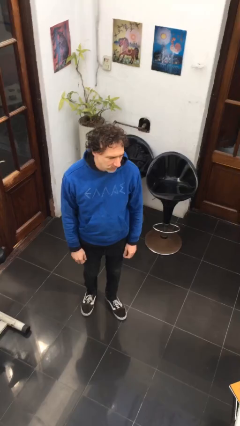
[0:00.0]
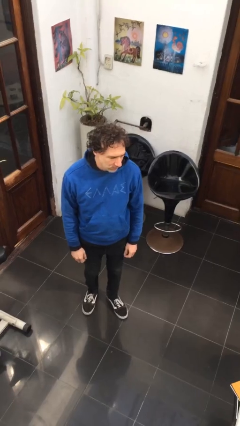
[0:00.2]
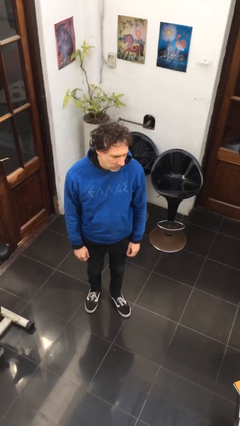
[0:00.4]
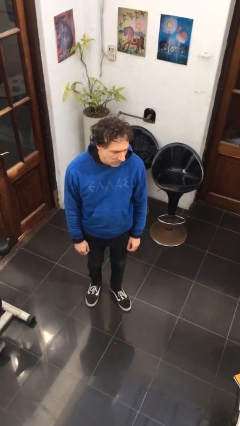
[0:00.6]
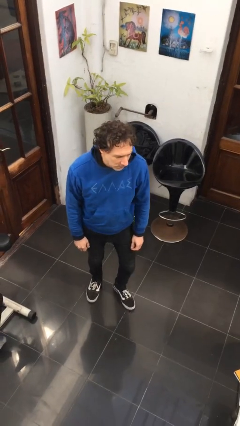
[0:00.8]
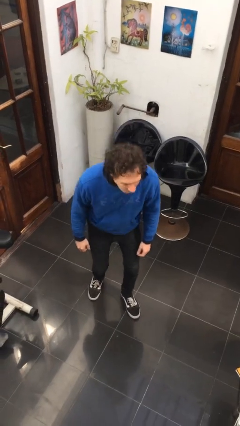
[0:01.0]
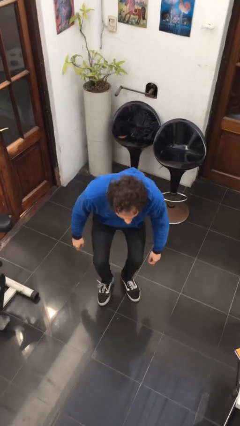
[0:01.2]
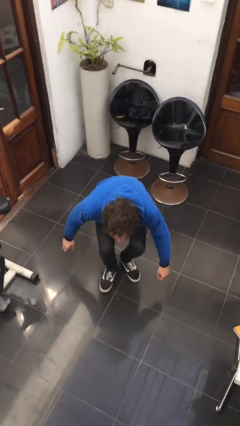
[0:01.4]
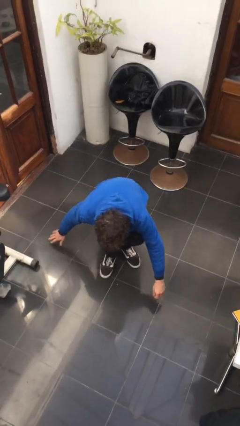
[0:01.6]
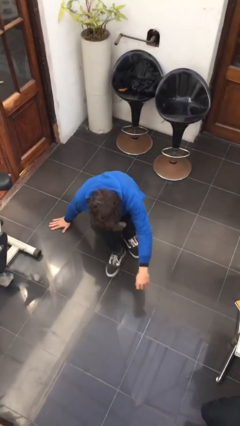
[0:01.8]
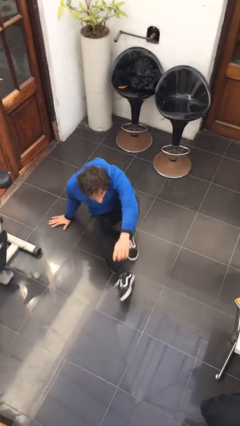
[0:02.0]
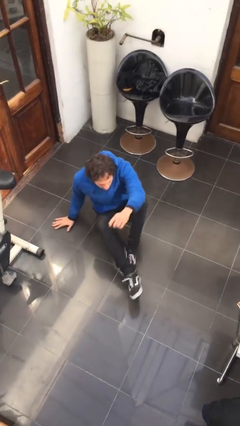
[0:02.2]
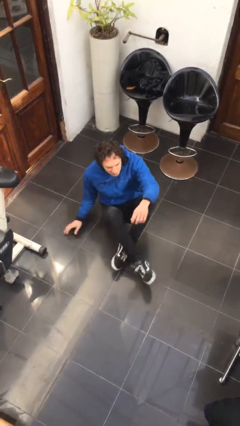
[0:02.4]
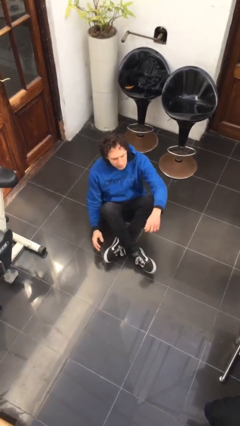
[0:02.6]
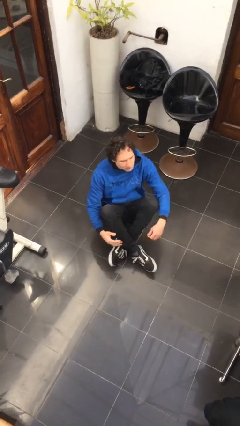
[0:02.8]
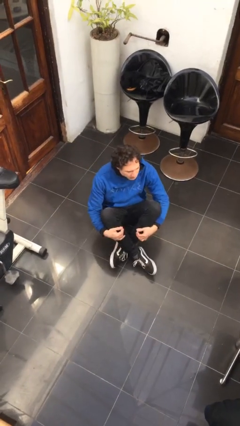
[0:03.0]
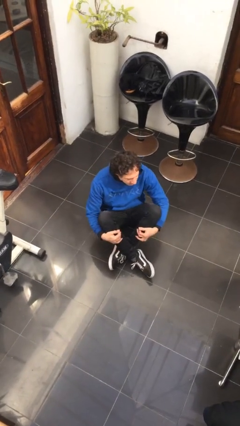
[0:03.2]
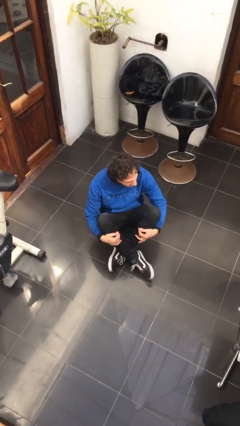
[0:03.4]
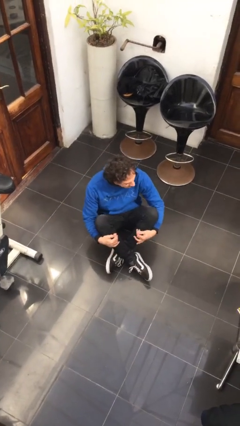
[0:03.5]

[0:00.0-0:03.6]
person sits crisscross

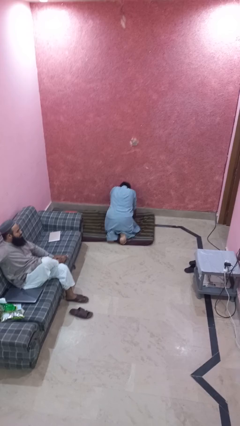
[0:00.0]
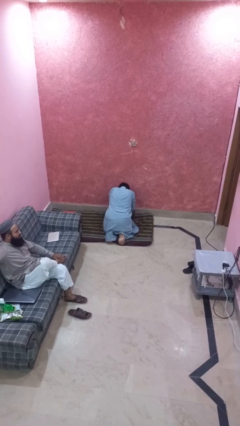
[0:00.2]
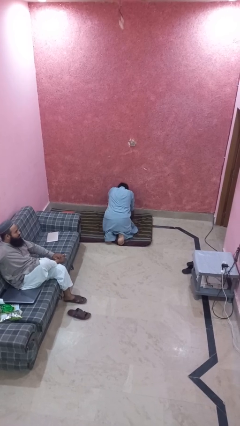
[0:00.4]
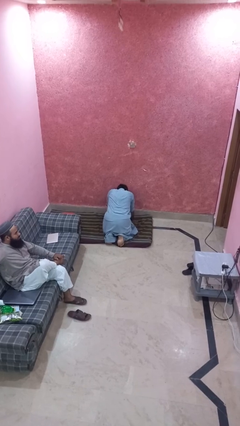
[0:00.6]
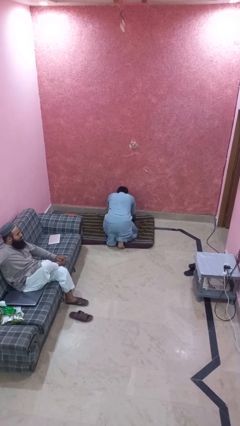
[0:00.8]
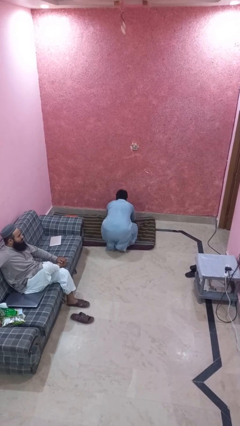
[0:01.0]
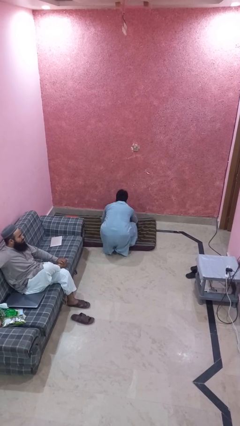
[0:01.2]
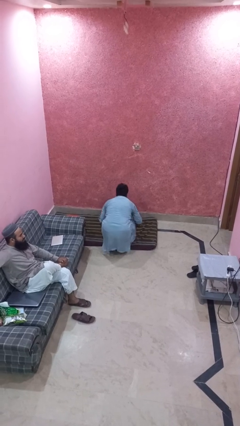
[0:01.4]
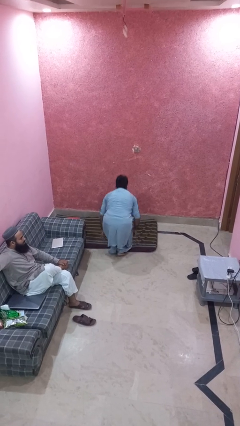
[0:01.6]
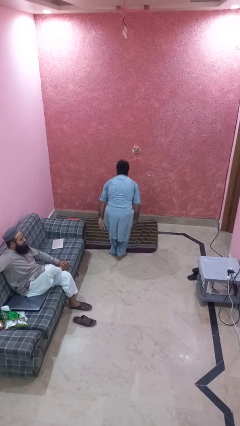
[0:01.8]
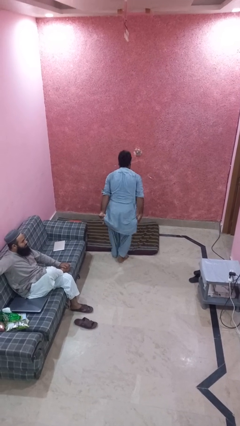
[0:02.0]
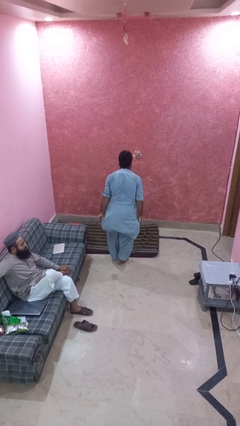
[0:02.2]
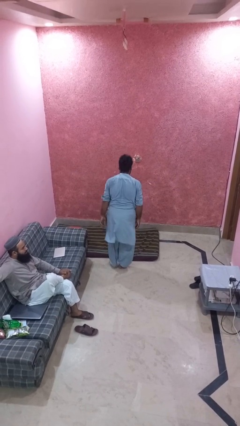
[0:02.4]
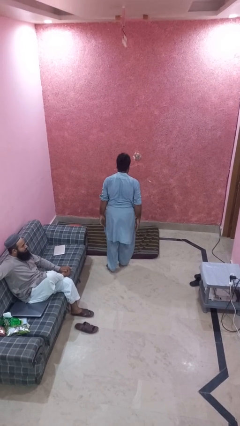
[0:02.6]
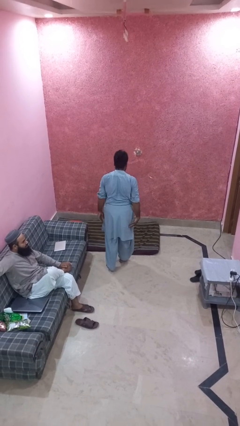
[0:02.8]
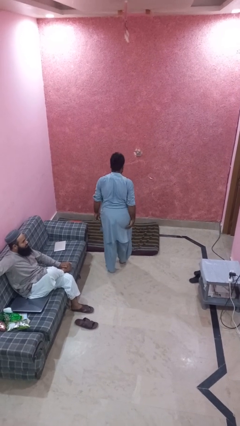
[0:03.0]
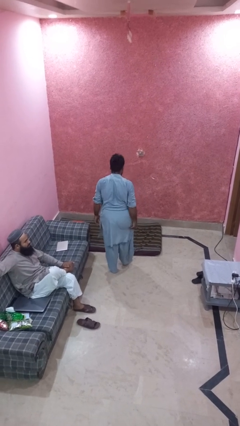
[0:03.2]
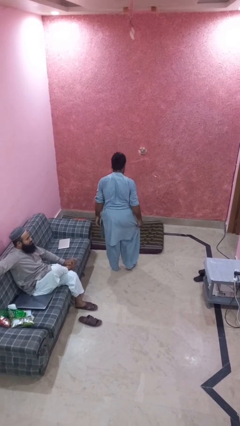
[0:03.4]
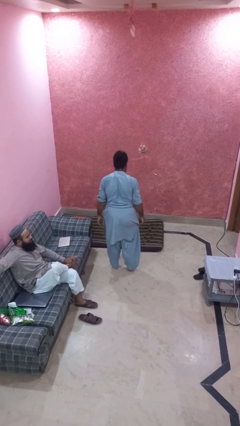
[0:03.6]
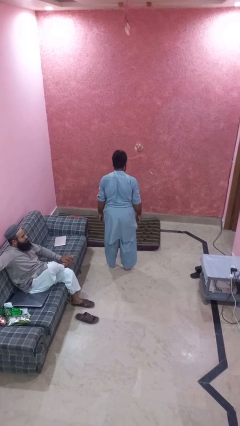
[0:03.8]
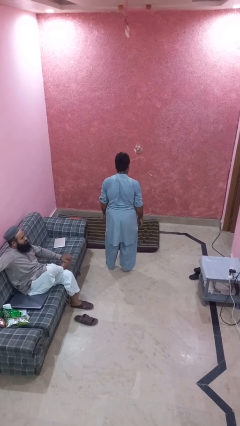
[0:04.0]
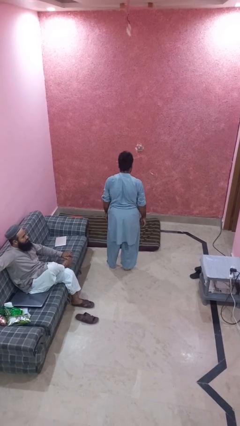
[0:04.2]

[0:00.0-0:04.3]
person stands up from floor

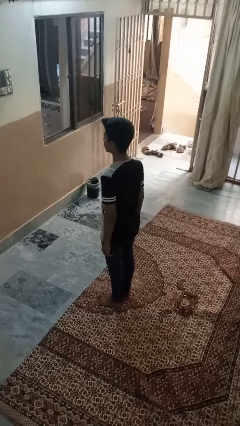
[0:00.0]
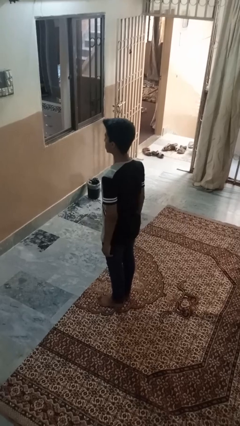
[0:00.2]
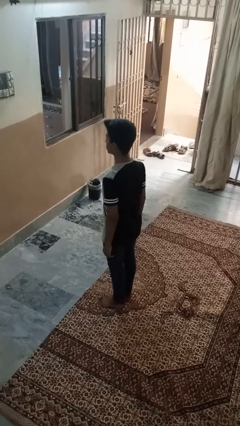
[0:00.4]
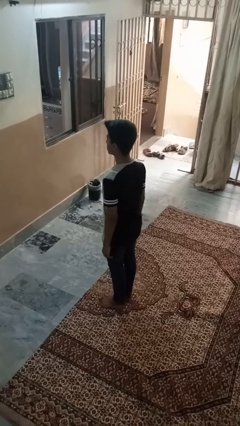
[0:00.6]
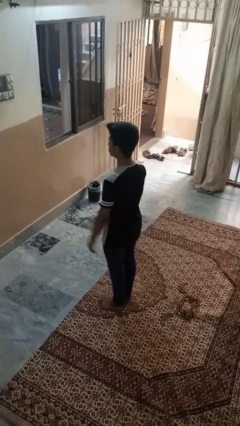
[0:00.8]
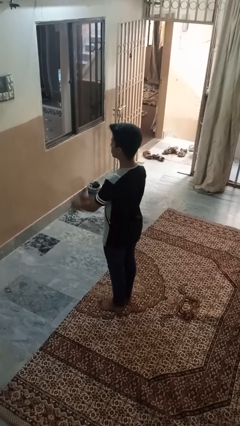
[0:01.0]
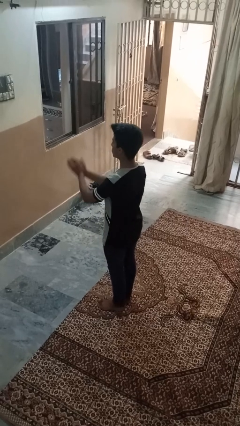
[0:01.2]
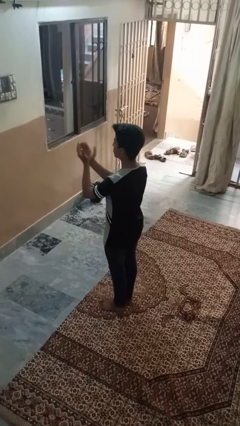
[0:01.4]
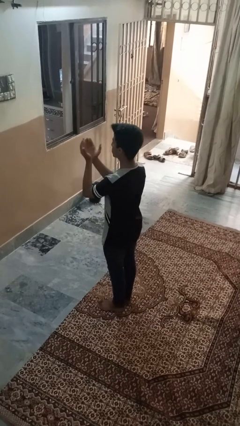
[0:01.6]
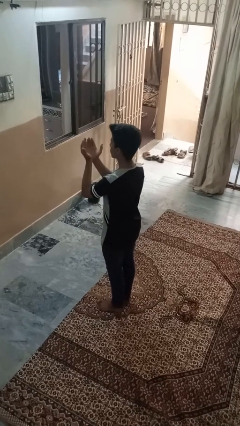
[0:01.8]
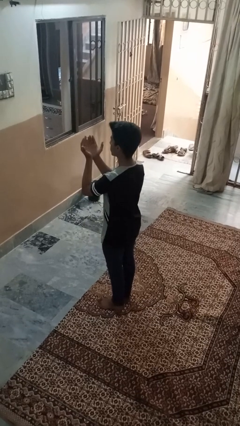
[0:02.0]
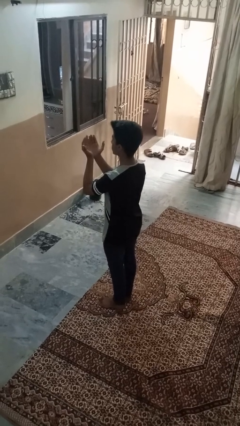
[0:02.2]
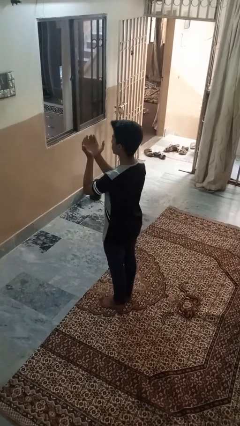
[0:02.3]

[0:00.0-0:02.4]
person prays

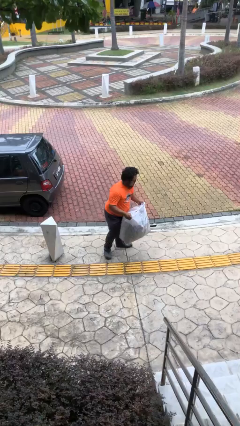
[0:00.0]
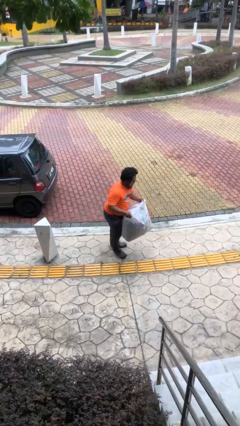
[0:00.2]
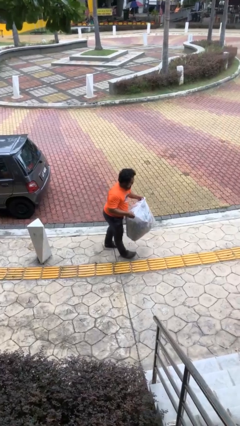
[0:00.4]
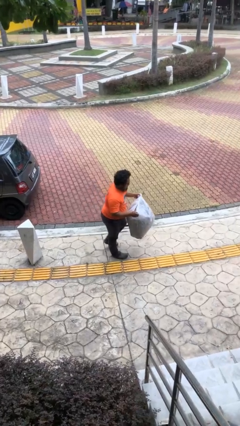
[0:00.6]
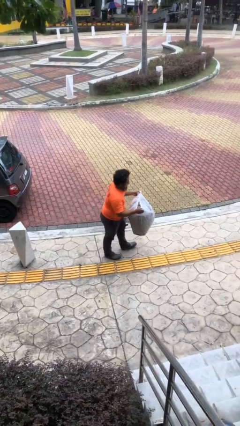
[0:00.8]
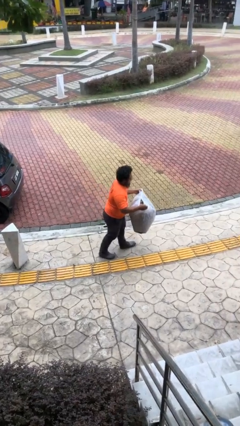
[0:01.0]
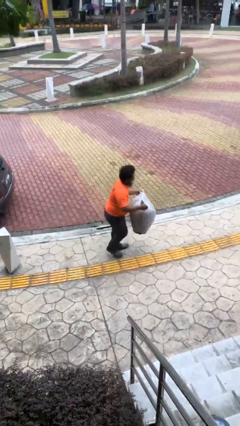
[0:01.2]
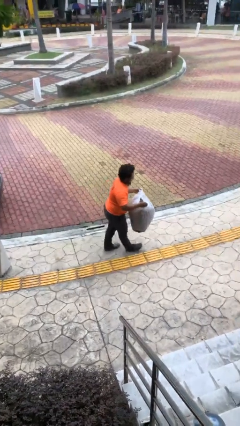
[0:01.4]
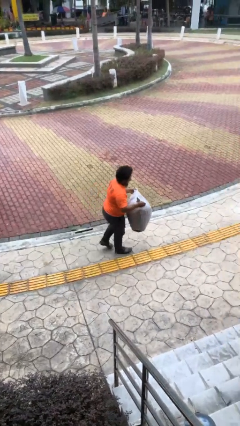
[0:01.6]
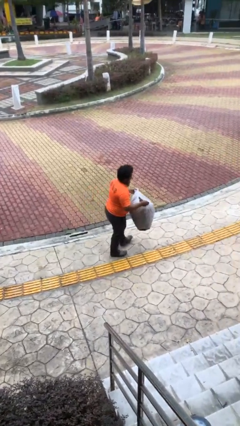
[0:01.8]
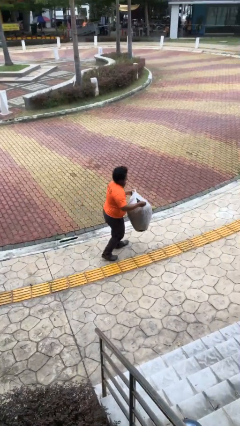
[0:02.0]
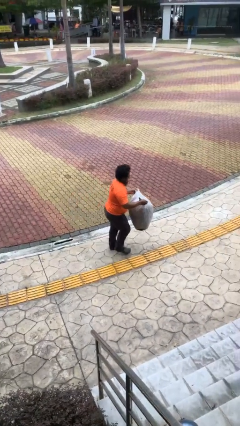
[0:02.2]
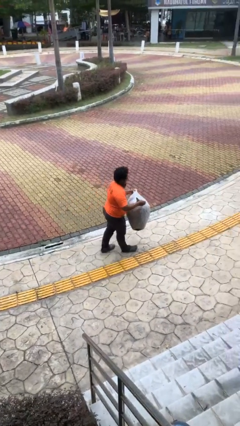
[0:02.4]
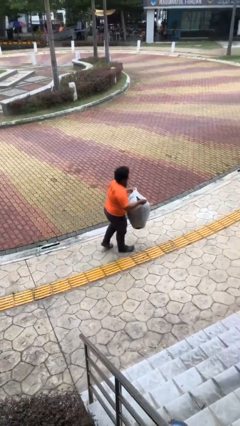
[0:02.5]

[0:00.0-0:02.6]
person carries heavy object

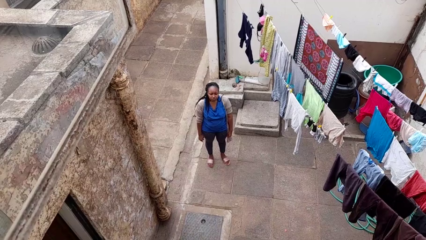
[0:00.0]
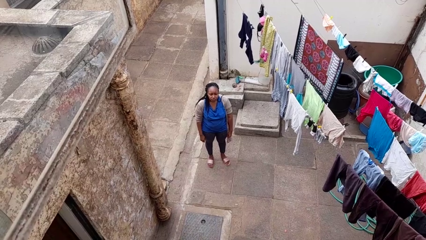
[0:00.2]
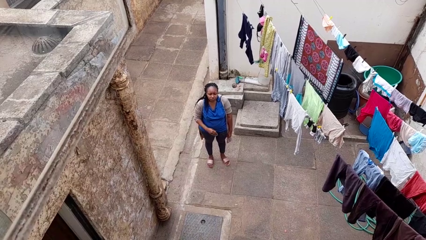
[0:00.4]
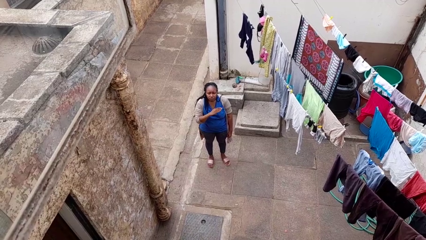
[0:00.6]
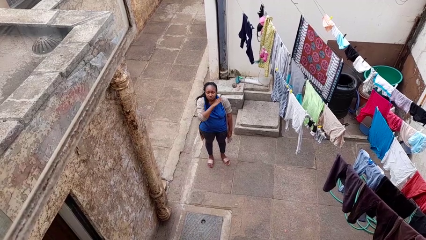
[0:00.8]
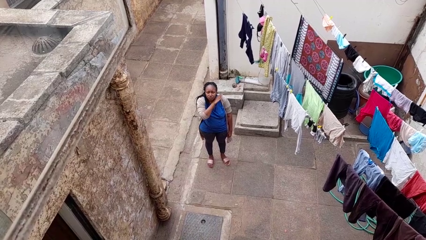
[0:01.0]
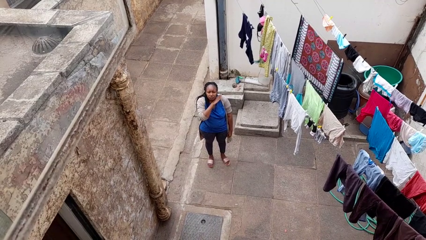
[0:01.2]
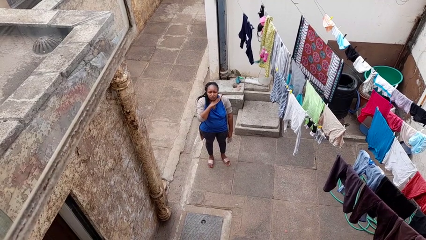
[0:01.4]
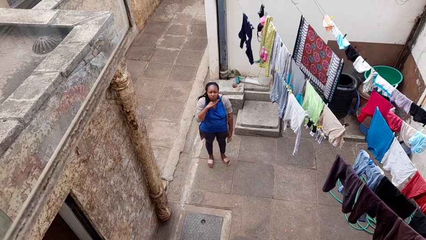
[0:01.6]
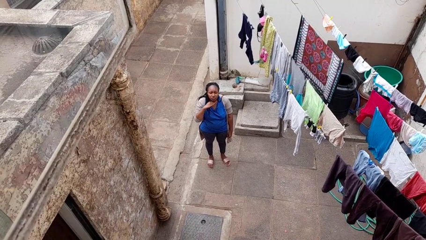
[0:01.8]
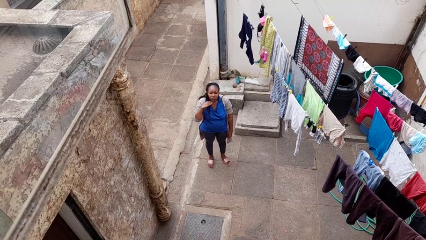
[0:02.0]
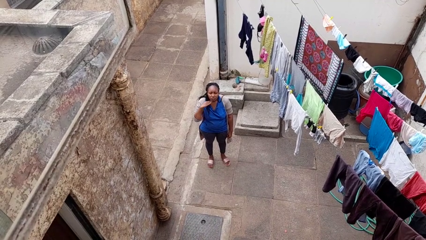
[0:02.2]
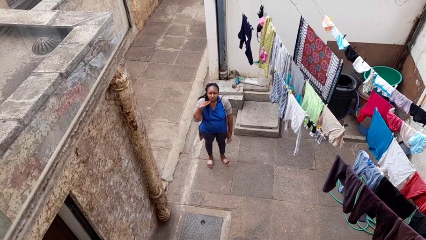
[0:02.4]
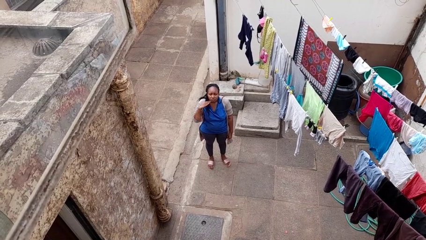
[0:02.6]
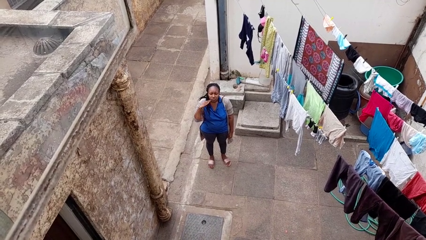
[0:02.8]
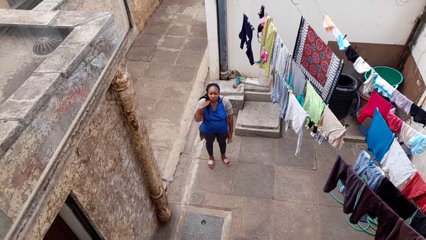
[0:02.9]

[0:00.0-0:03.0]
person gestures cut

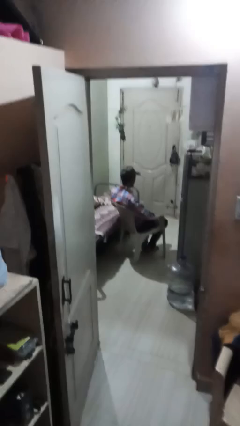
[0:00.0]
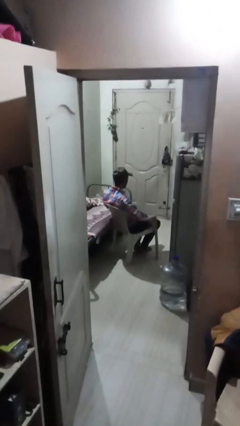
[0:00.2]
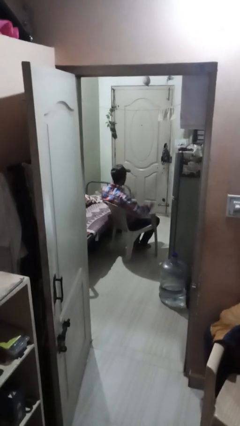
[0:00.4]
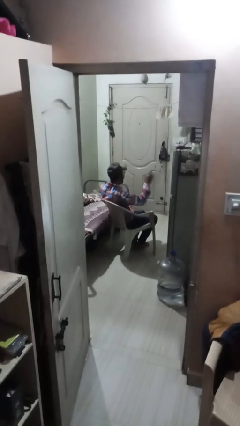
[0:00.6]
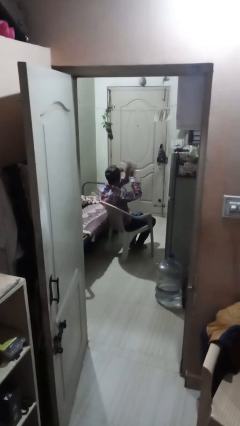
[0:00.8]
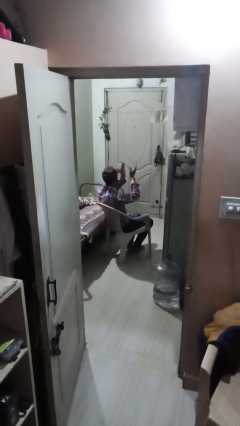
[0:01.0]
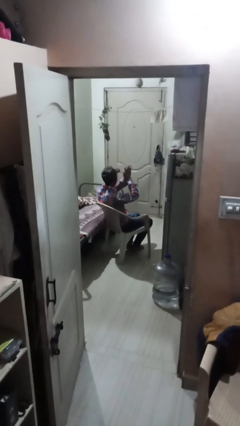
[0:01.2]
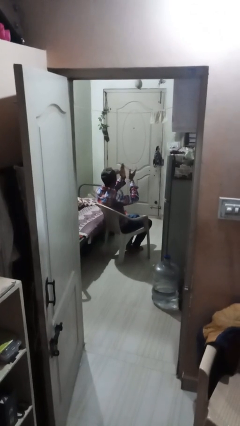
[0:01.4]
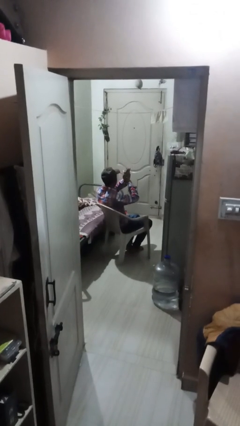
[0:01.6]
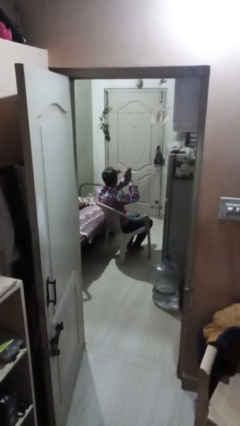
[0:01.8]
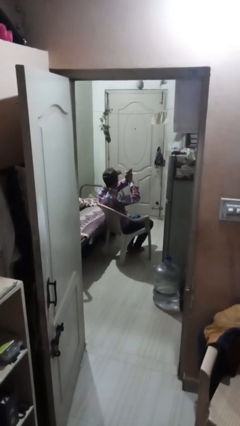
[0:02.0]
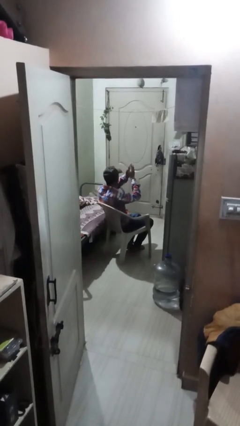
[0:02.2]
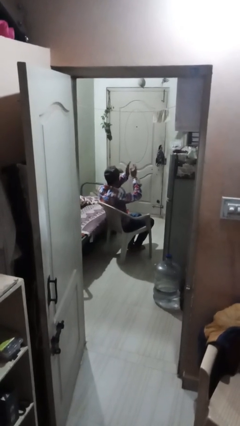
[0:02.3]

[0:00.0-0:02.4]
person claps hands
